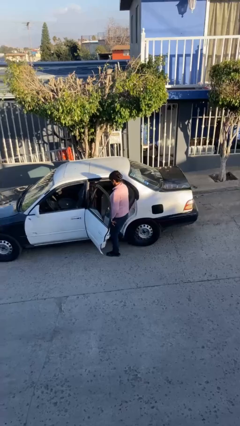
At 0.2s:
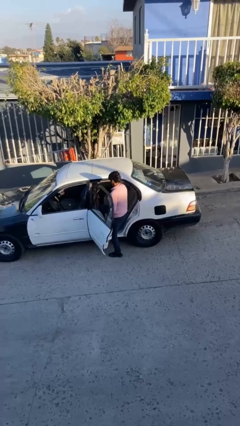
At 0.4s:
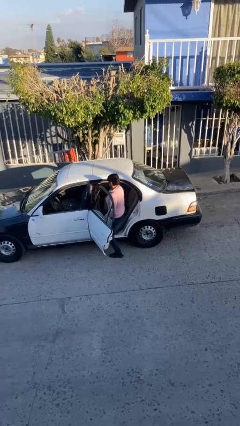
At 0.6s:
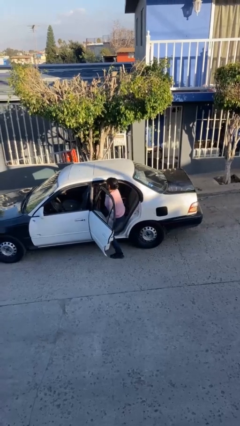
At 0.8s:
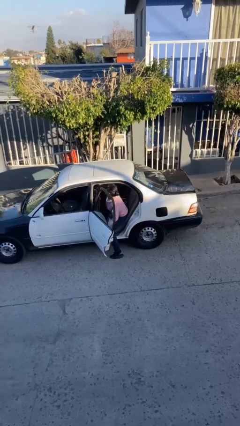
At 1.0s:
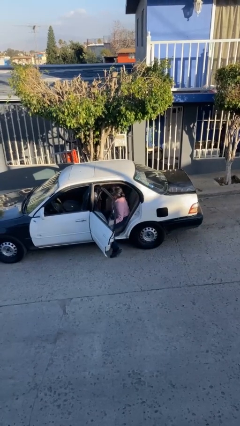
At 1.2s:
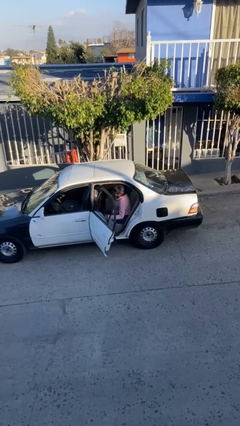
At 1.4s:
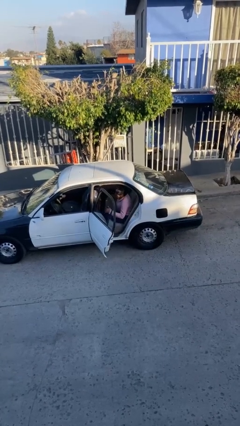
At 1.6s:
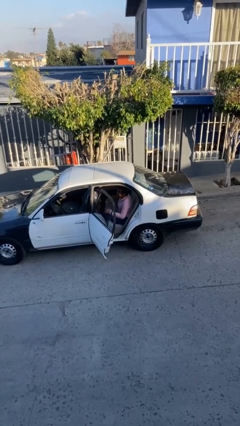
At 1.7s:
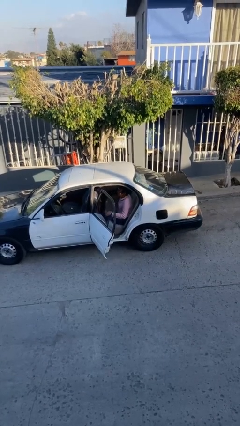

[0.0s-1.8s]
person enters car

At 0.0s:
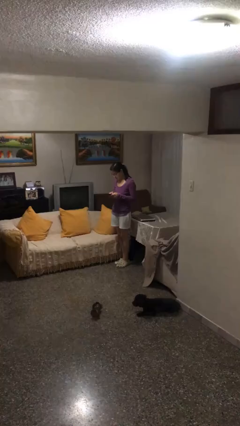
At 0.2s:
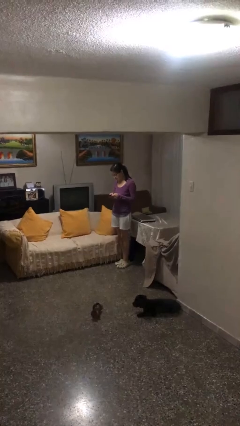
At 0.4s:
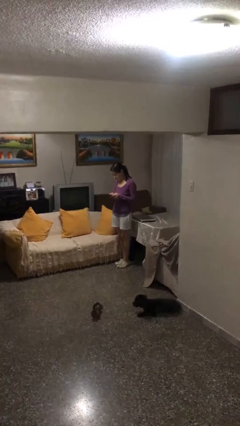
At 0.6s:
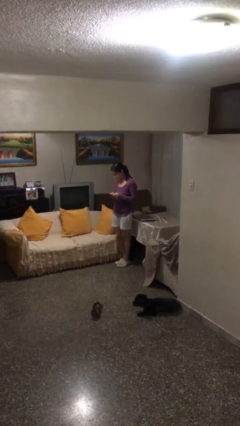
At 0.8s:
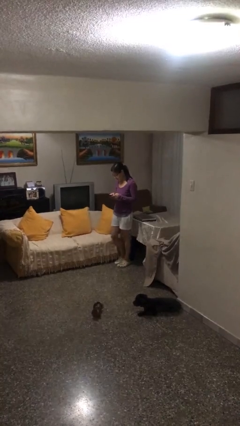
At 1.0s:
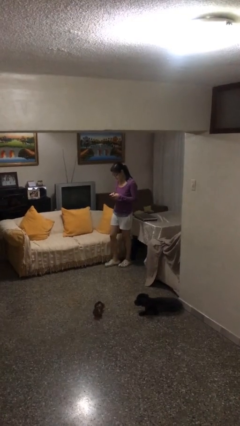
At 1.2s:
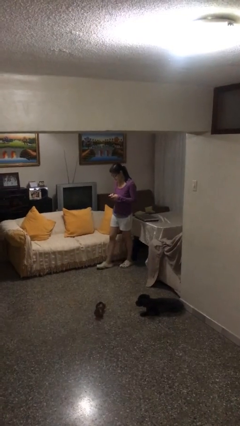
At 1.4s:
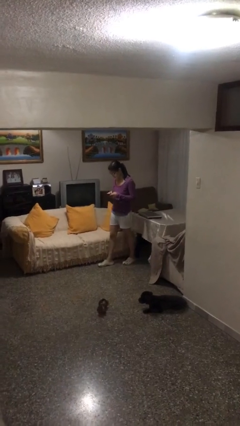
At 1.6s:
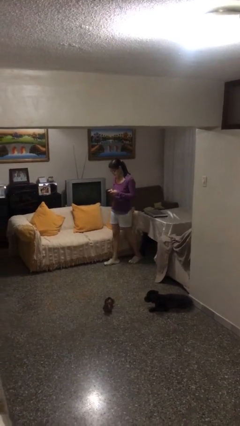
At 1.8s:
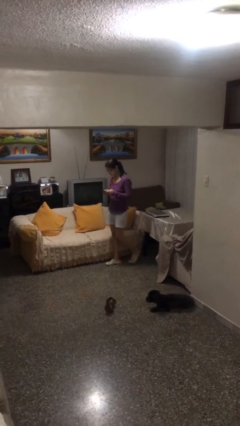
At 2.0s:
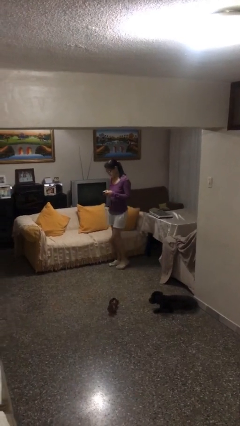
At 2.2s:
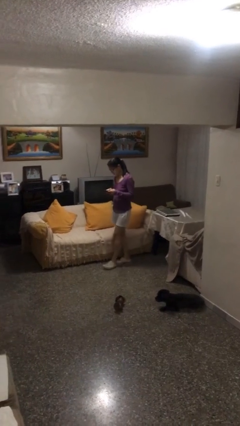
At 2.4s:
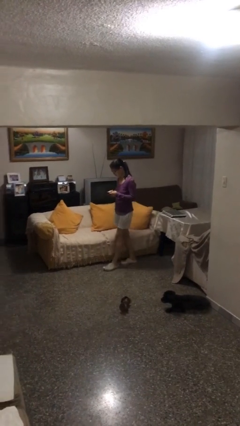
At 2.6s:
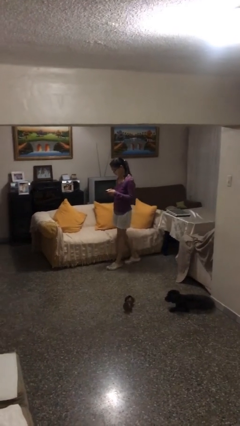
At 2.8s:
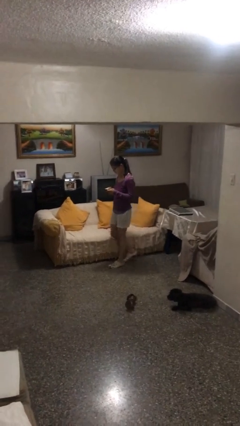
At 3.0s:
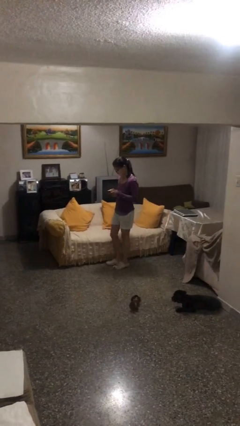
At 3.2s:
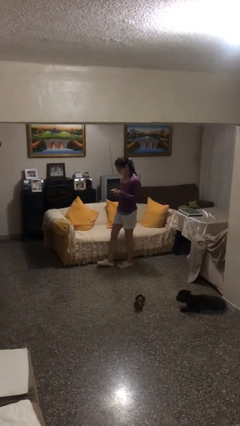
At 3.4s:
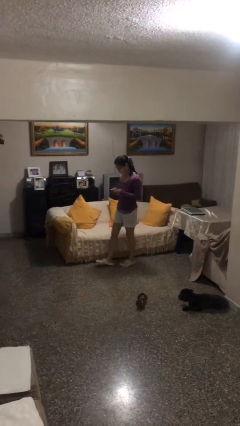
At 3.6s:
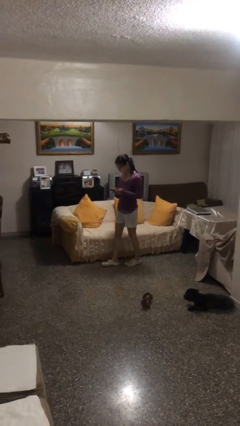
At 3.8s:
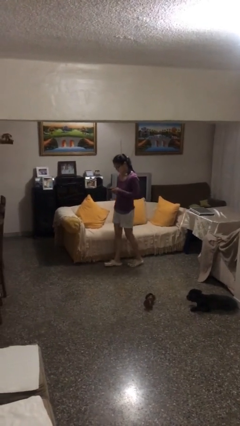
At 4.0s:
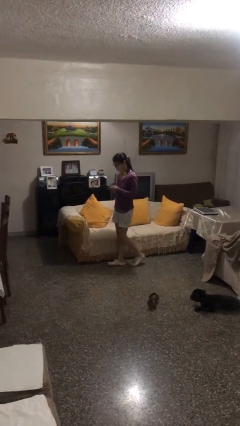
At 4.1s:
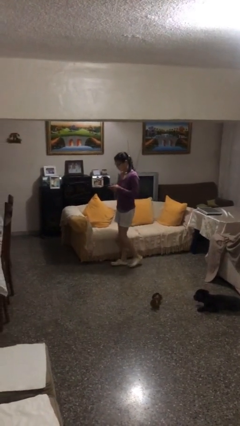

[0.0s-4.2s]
person texts on phone

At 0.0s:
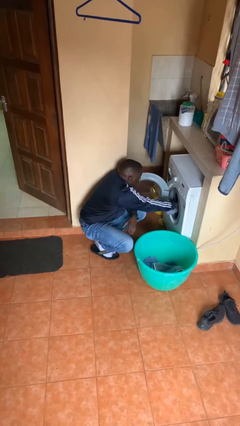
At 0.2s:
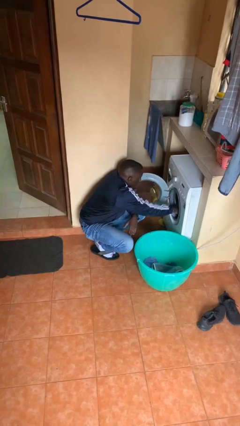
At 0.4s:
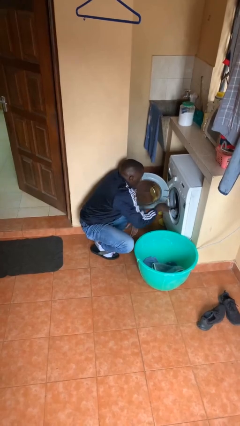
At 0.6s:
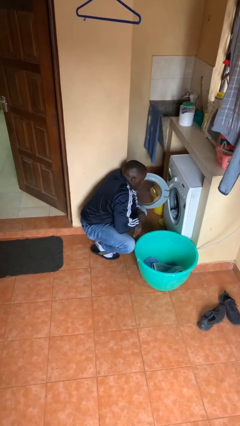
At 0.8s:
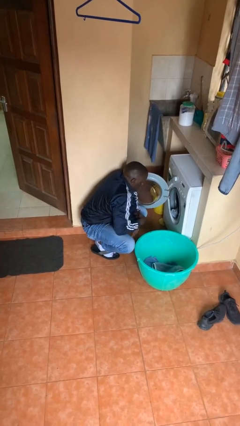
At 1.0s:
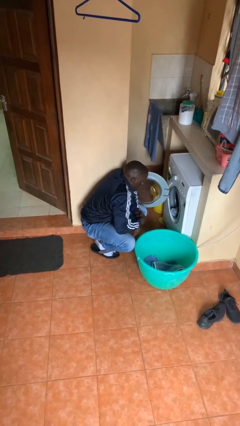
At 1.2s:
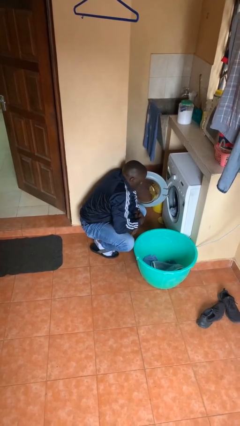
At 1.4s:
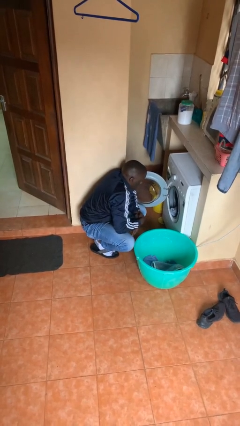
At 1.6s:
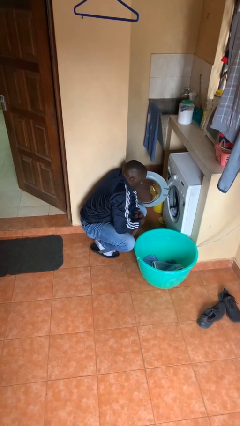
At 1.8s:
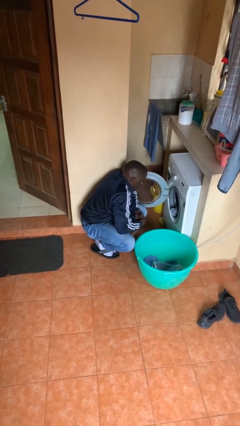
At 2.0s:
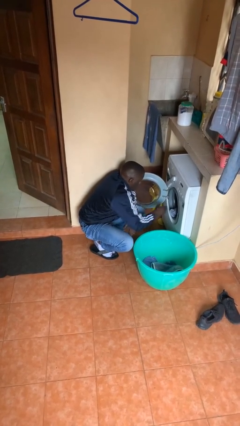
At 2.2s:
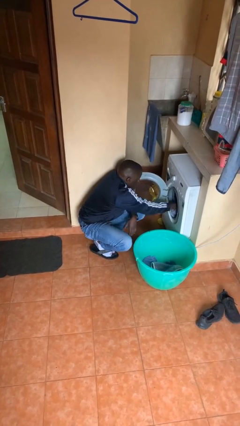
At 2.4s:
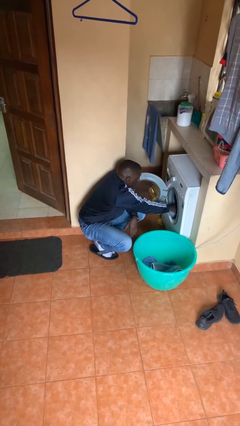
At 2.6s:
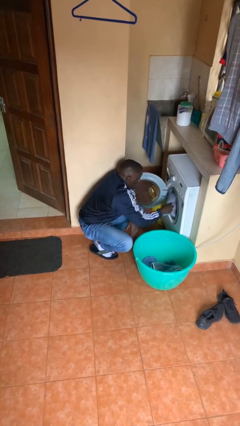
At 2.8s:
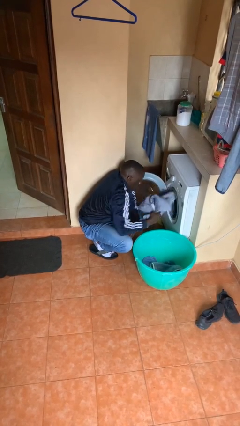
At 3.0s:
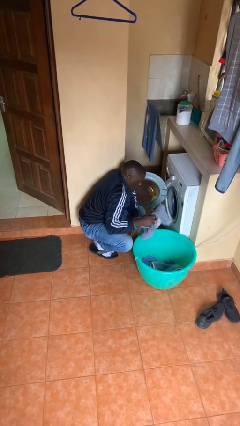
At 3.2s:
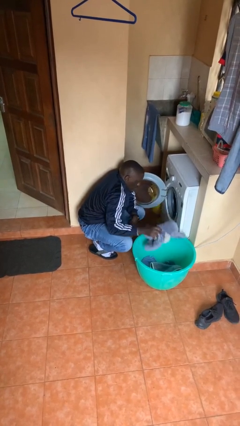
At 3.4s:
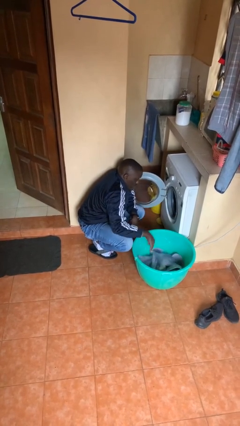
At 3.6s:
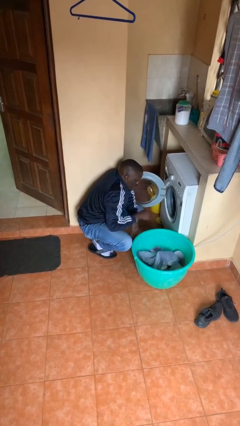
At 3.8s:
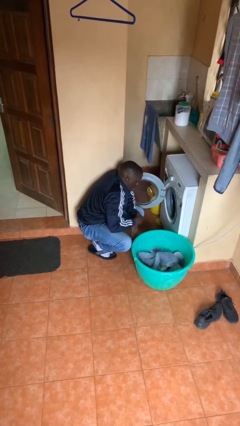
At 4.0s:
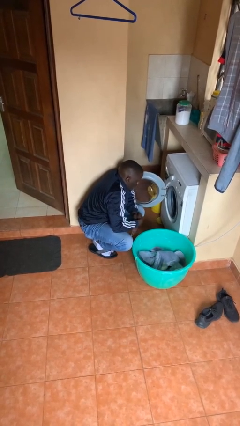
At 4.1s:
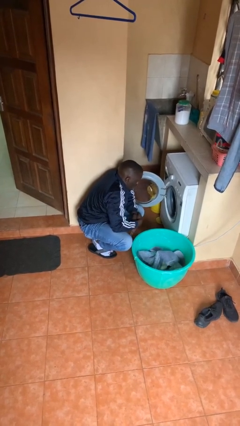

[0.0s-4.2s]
person loads clotheswasher

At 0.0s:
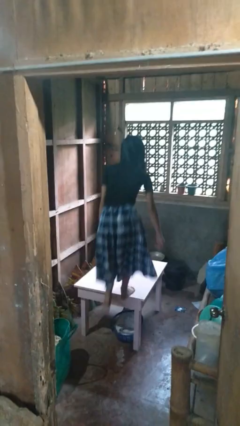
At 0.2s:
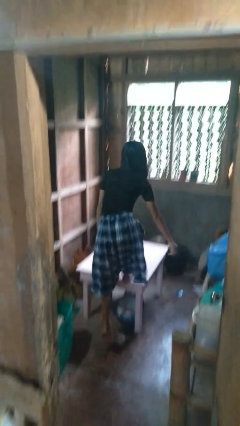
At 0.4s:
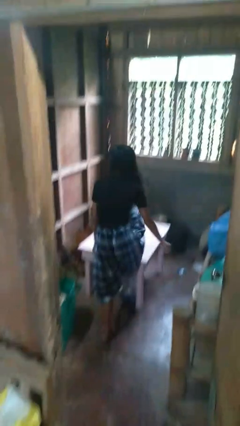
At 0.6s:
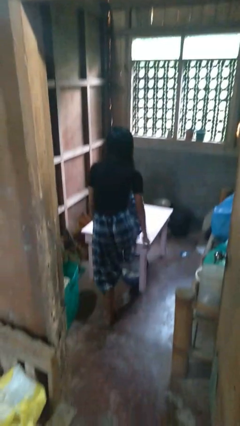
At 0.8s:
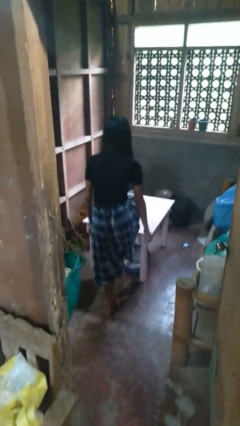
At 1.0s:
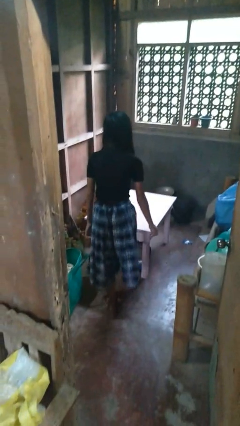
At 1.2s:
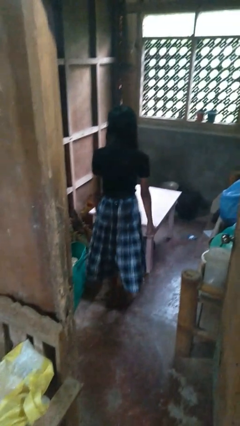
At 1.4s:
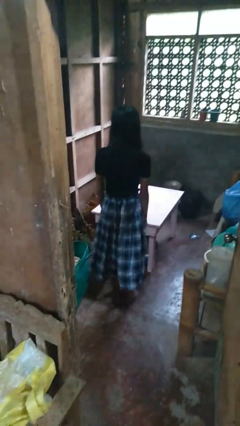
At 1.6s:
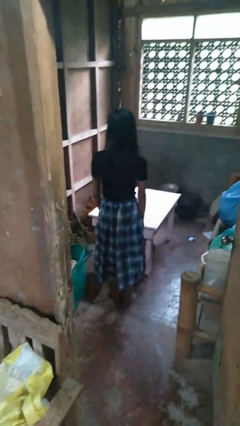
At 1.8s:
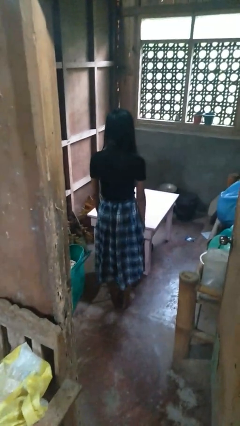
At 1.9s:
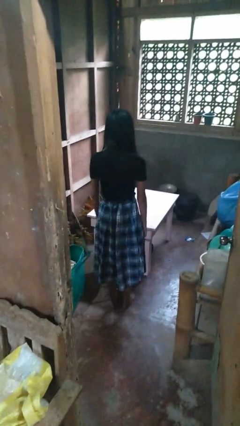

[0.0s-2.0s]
person climbs off table

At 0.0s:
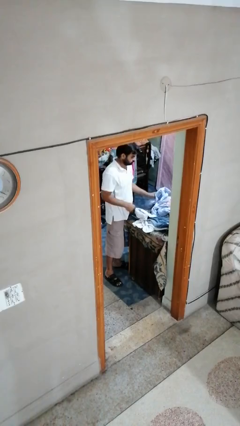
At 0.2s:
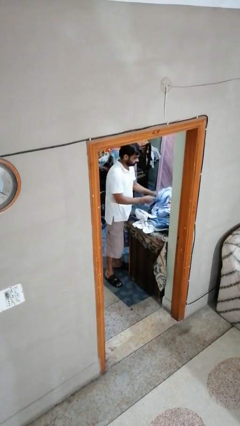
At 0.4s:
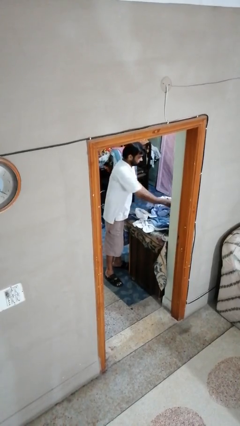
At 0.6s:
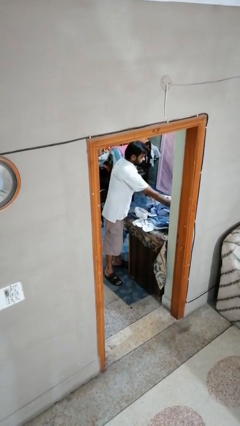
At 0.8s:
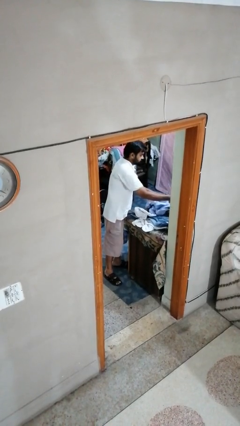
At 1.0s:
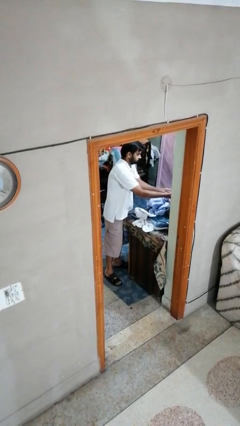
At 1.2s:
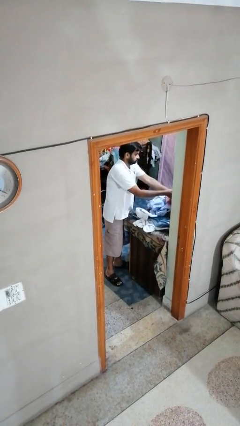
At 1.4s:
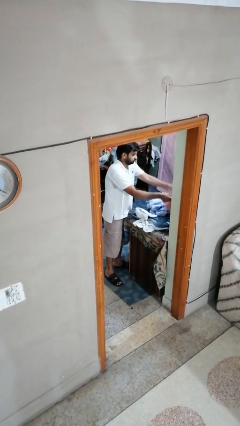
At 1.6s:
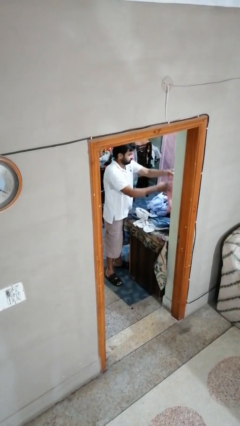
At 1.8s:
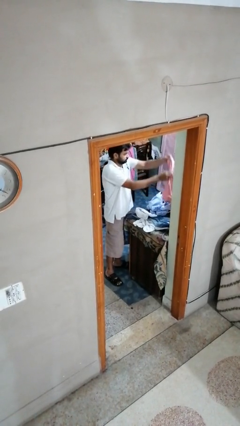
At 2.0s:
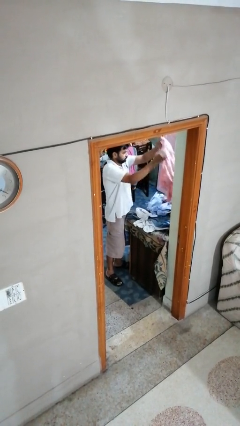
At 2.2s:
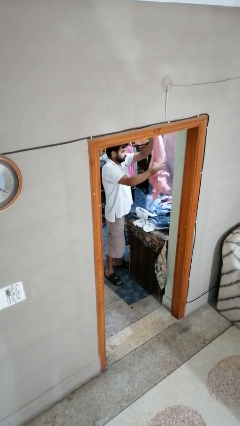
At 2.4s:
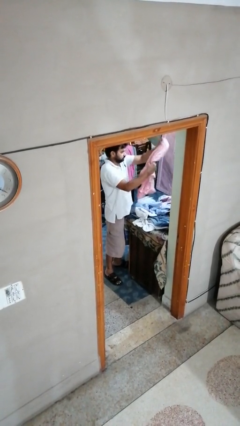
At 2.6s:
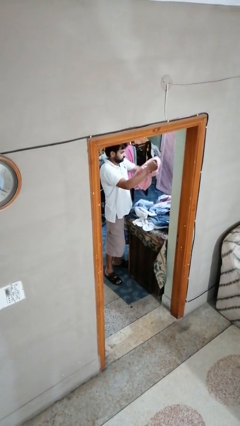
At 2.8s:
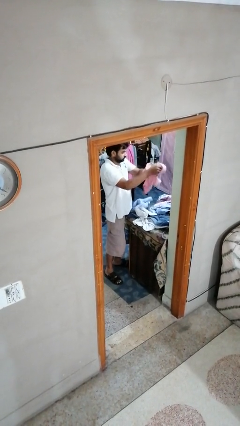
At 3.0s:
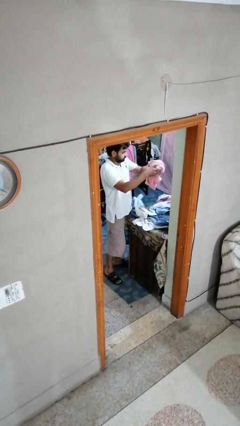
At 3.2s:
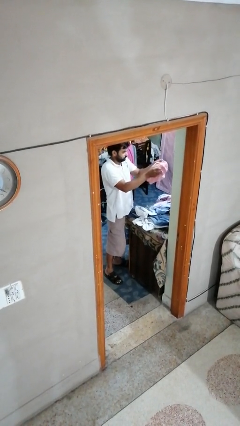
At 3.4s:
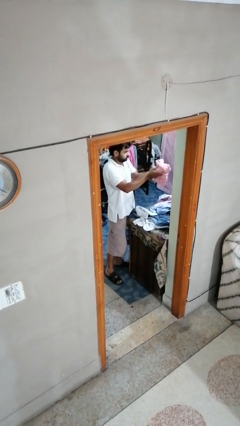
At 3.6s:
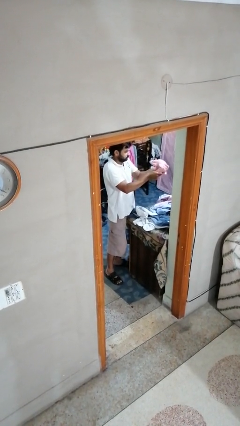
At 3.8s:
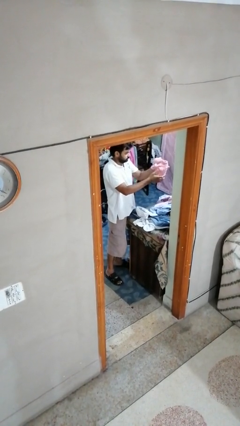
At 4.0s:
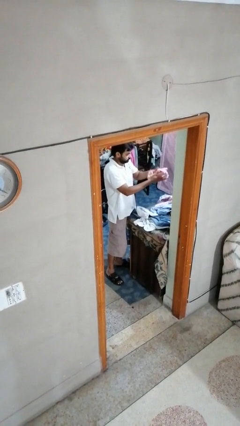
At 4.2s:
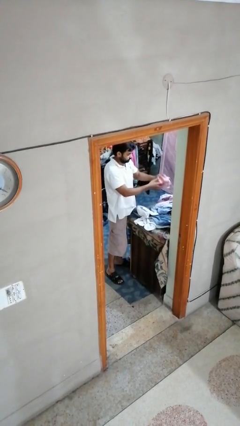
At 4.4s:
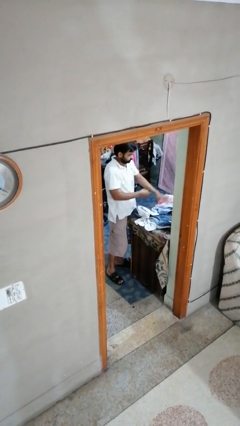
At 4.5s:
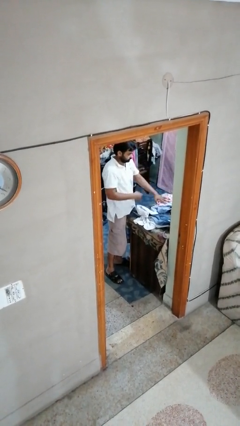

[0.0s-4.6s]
person folds shirt

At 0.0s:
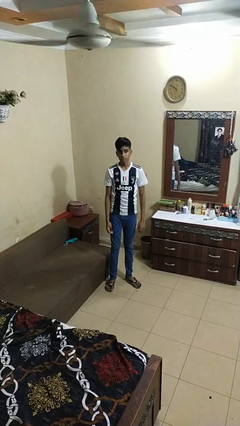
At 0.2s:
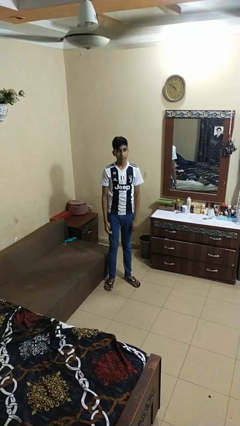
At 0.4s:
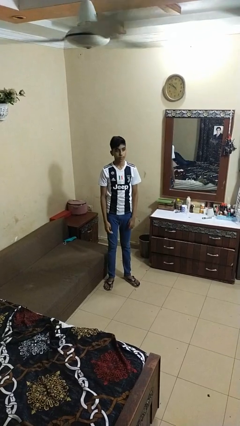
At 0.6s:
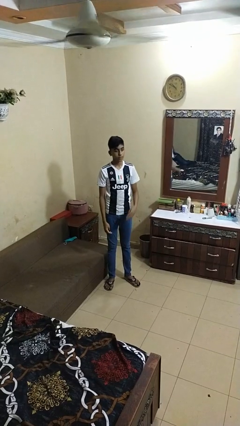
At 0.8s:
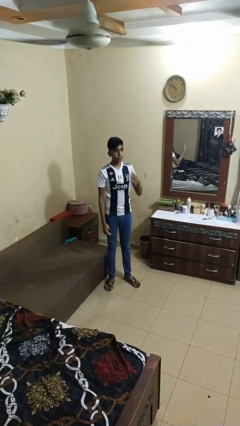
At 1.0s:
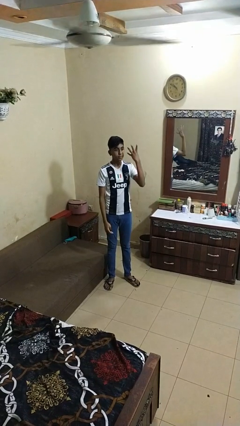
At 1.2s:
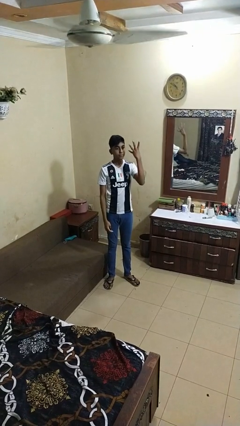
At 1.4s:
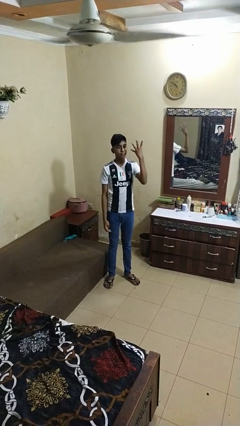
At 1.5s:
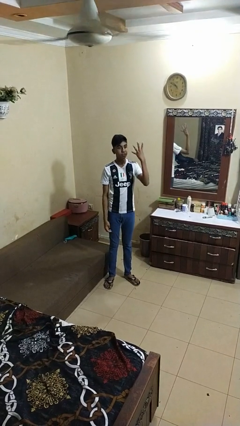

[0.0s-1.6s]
person gestures number four
